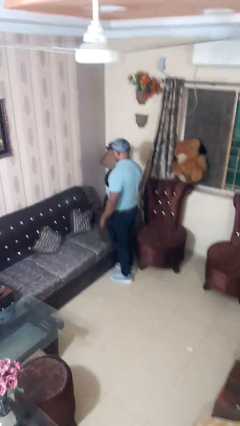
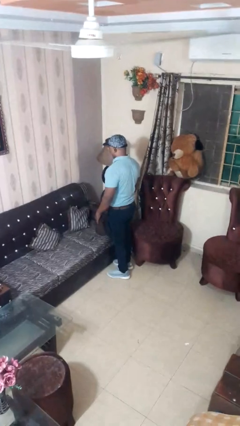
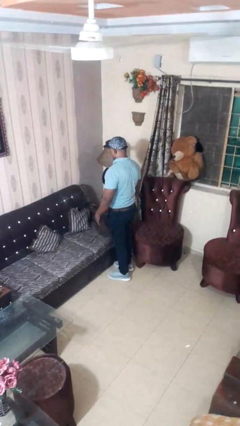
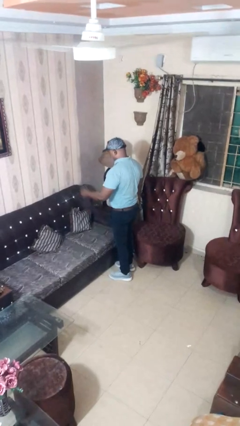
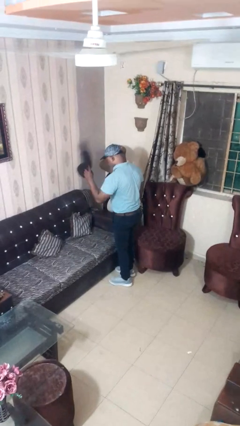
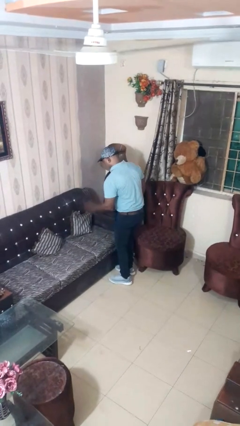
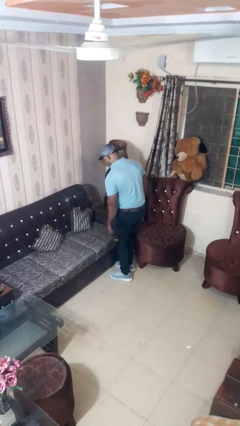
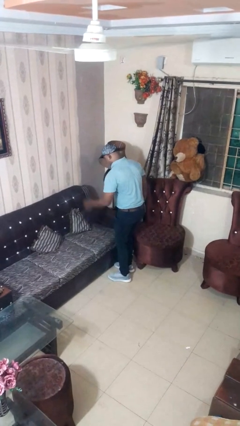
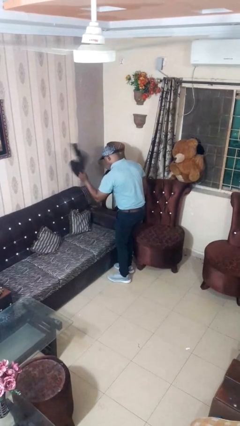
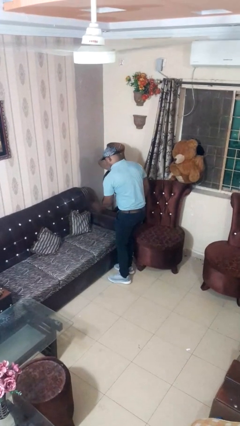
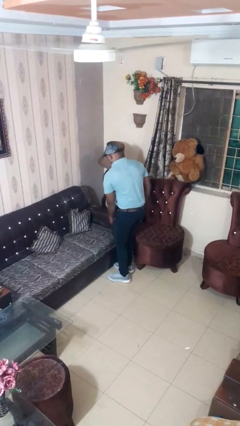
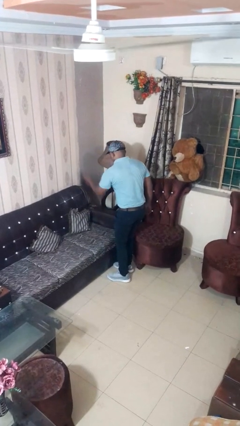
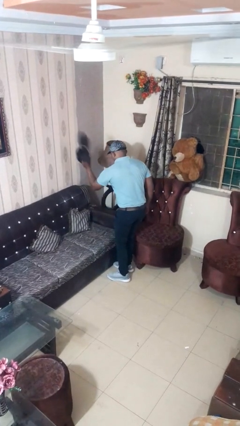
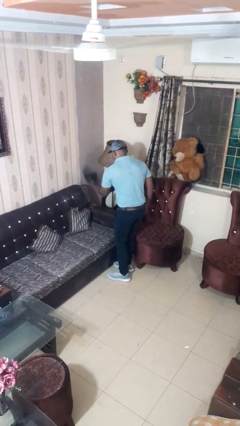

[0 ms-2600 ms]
person dusts furniture

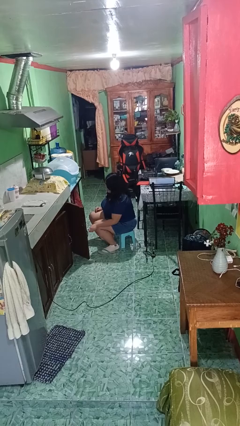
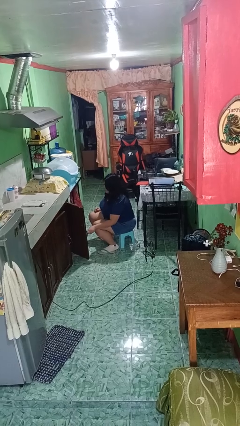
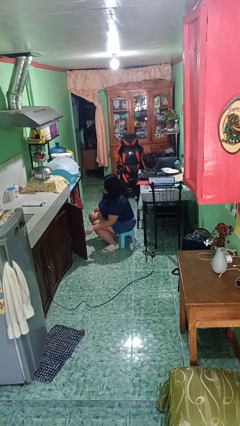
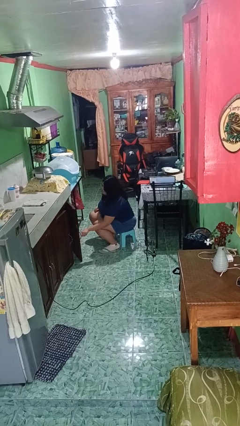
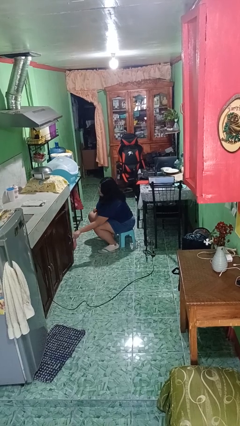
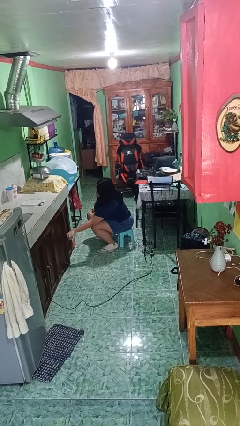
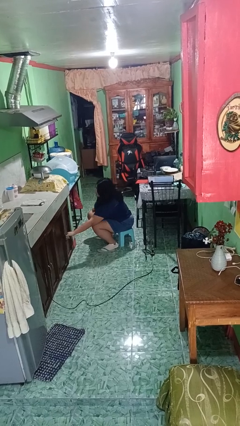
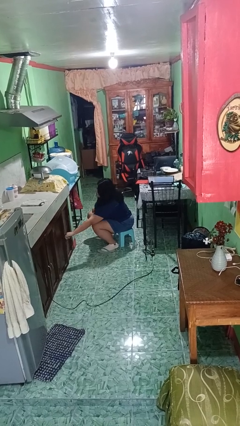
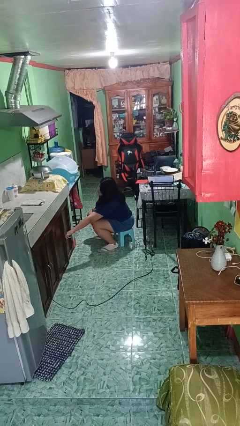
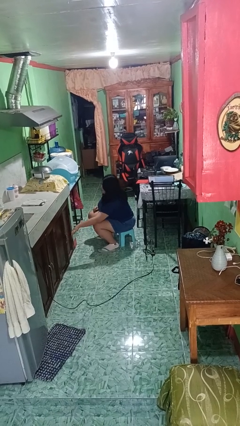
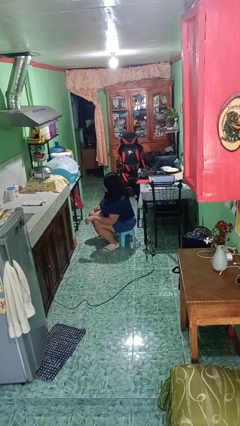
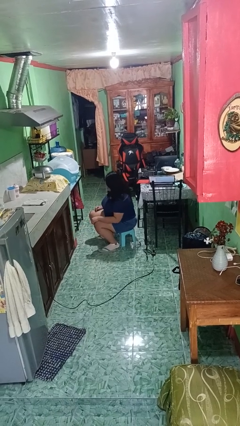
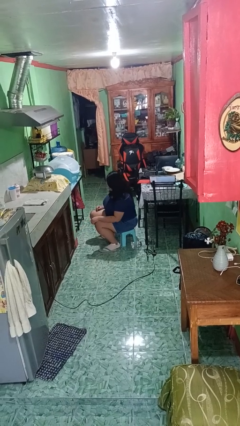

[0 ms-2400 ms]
person closes cabinet

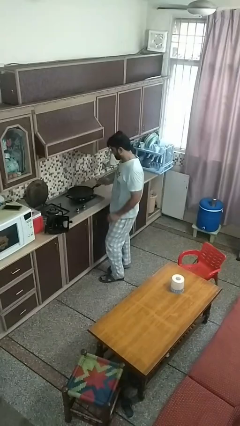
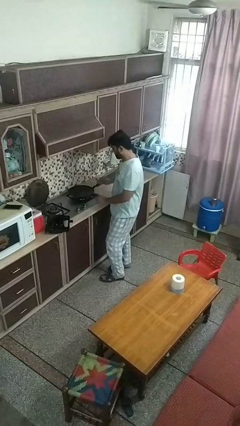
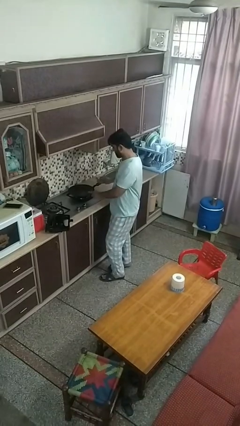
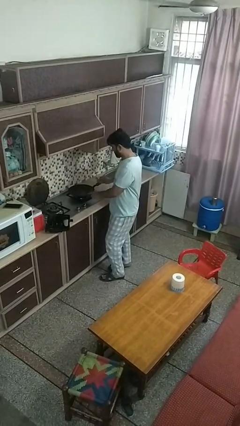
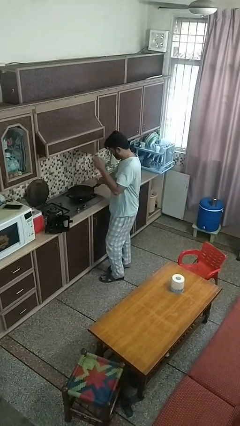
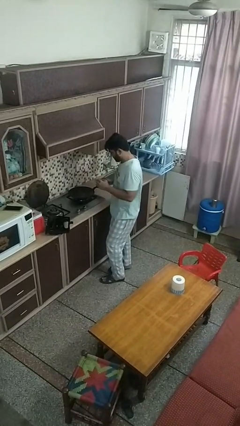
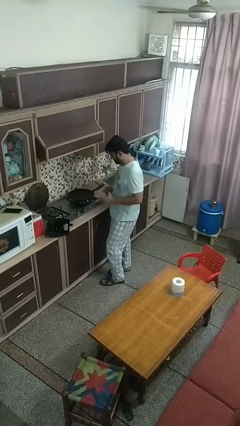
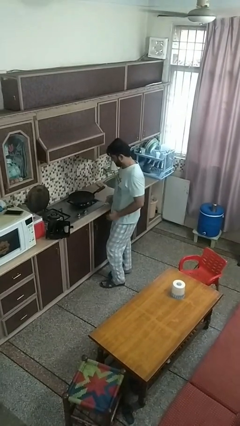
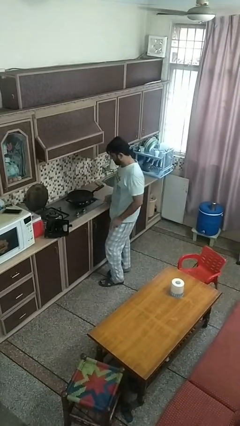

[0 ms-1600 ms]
person burns hand

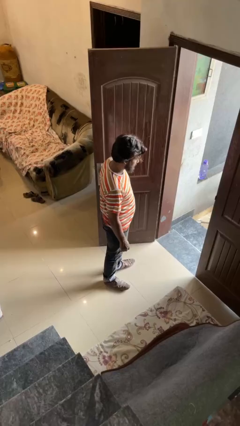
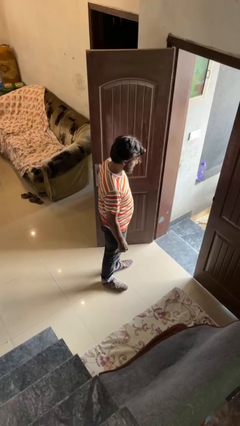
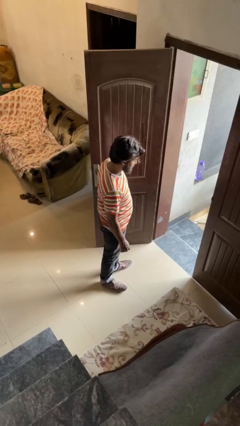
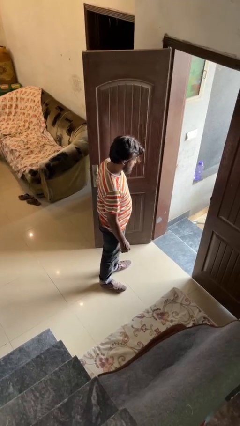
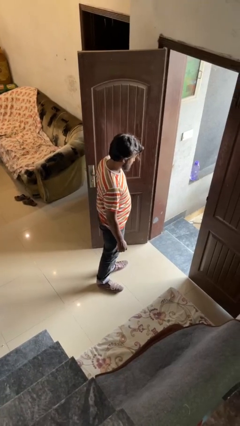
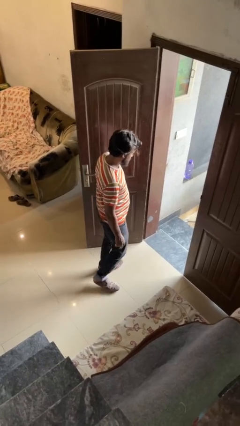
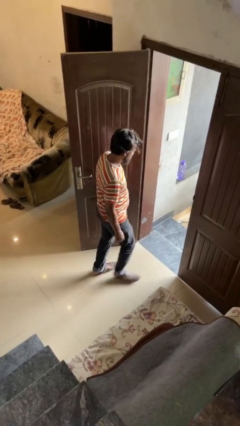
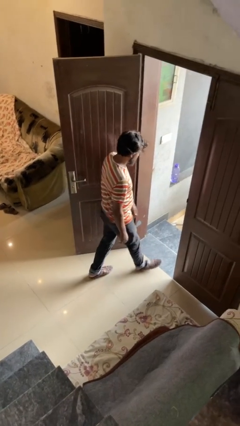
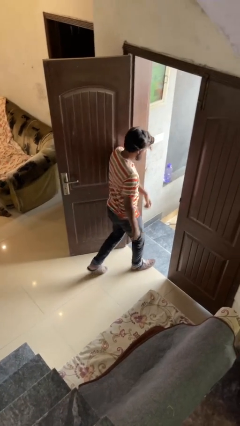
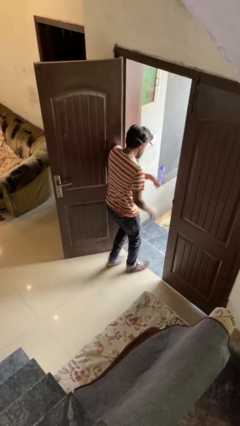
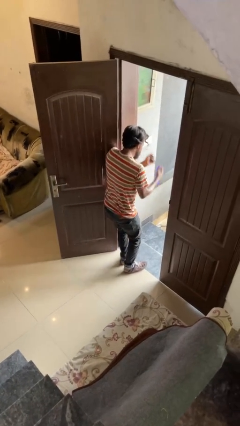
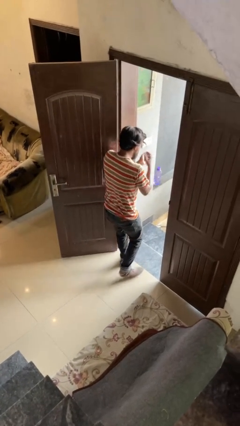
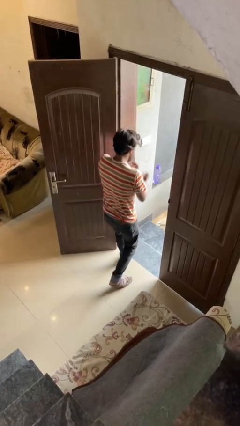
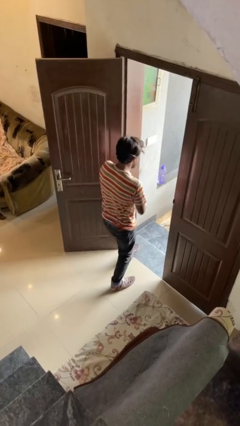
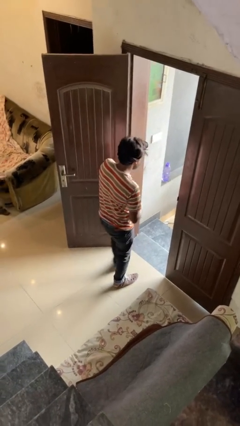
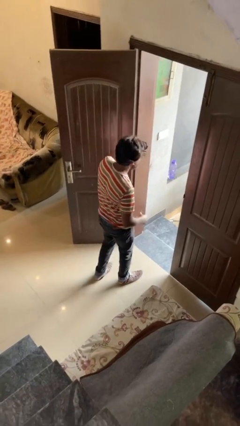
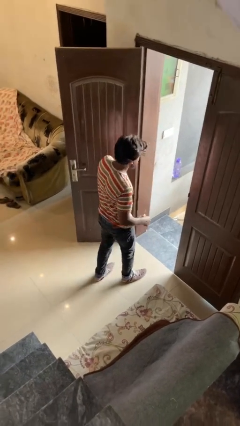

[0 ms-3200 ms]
person bumps into wall

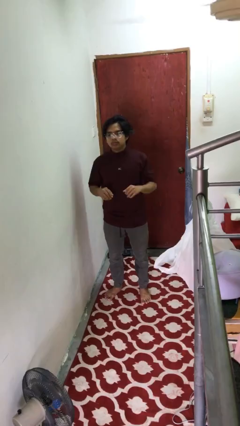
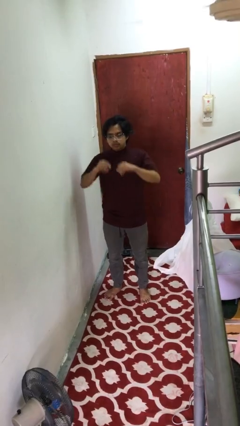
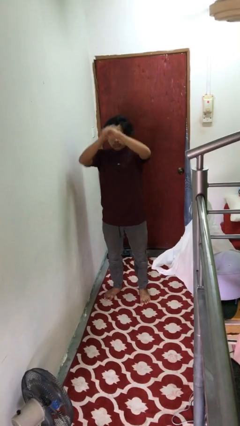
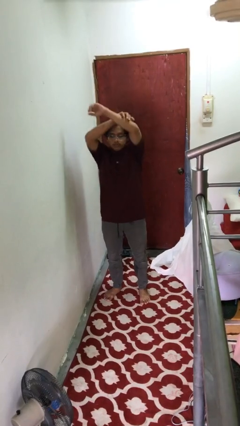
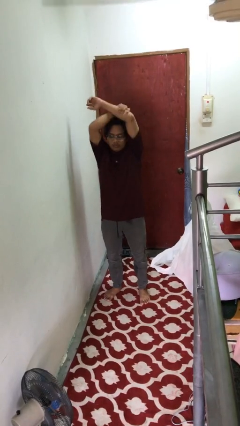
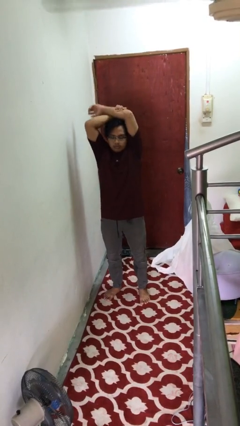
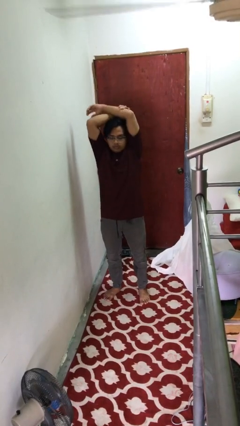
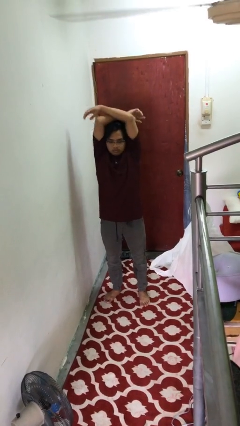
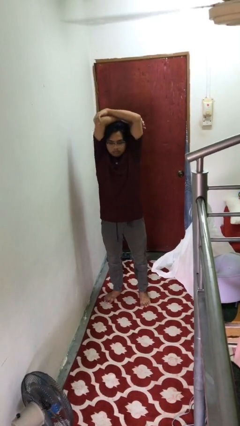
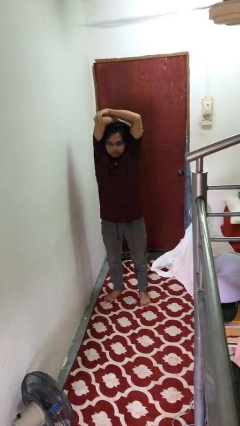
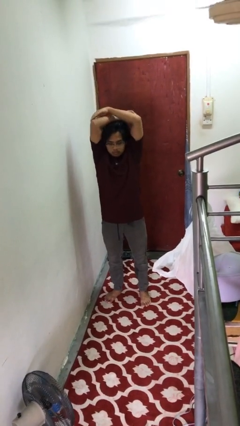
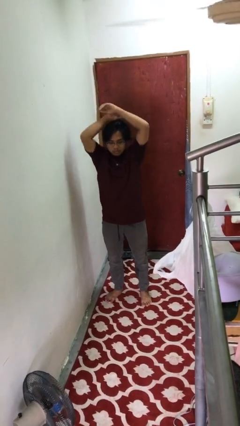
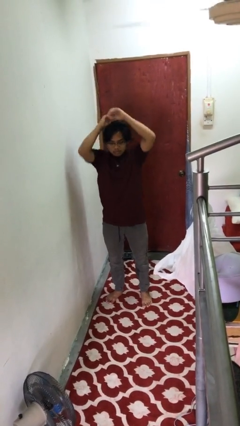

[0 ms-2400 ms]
person stretches arms over head

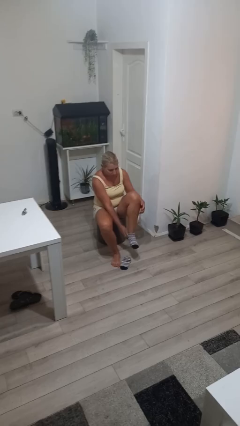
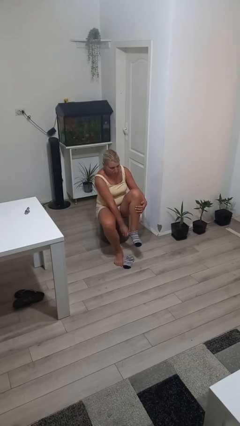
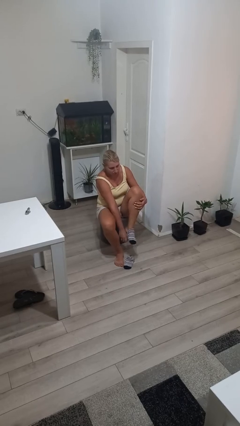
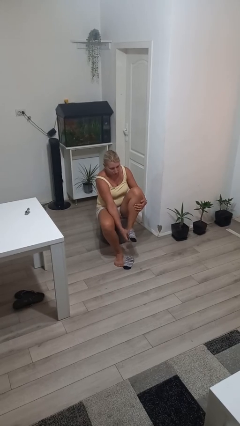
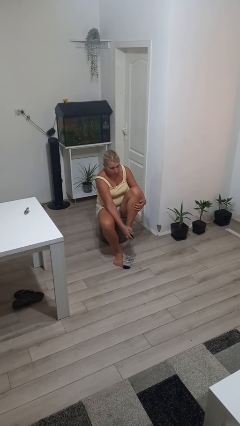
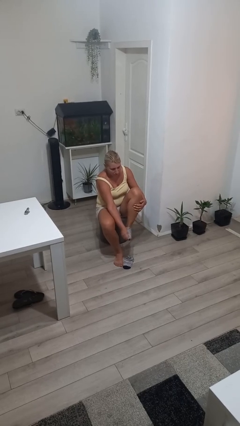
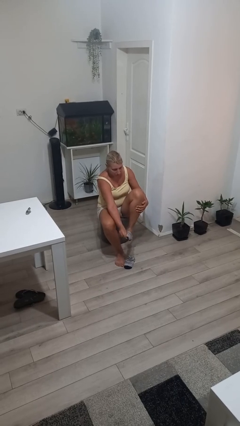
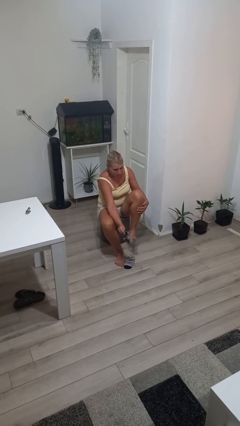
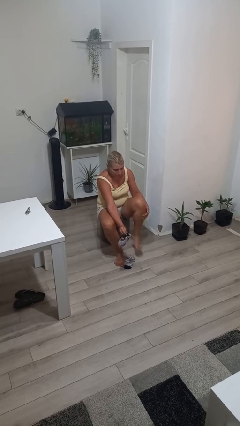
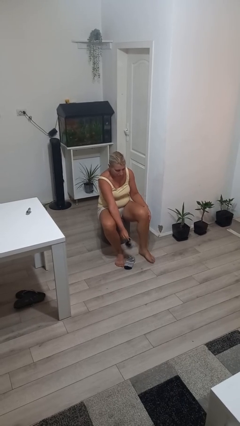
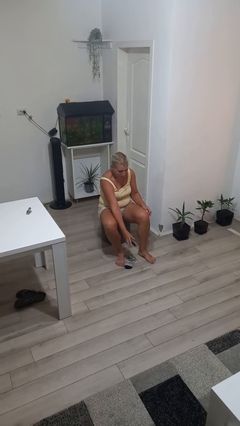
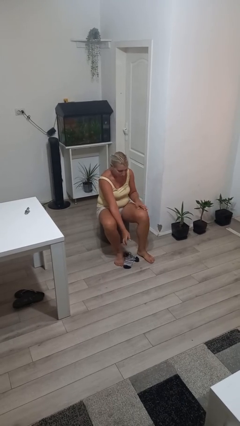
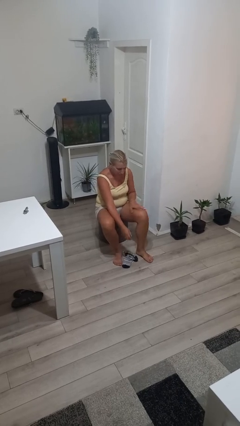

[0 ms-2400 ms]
person takes off socks

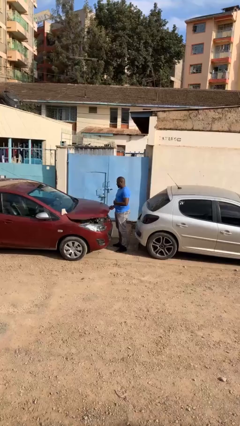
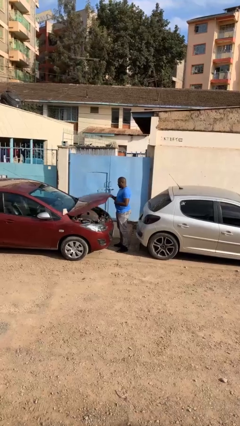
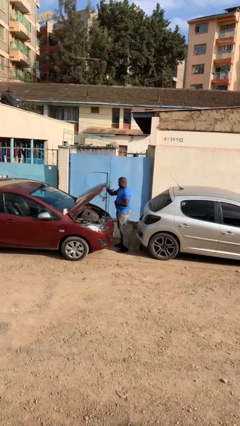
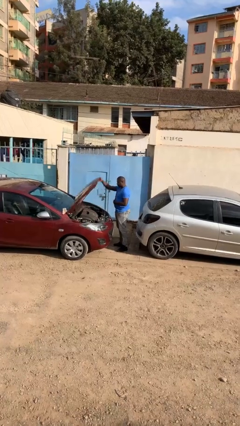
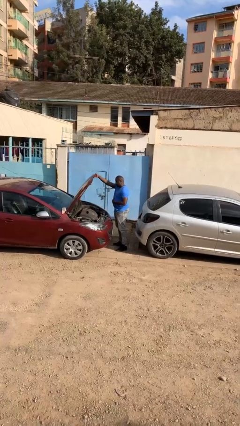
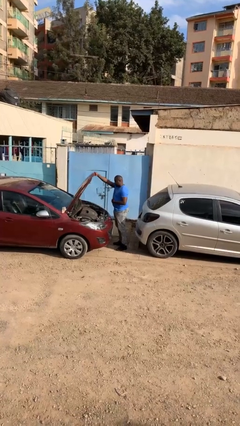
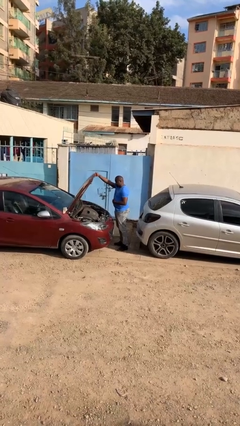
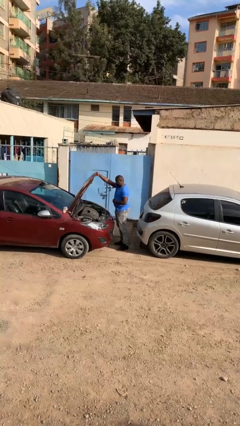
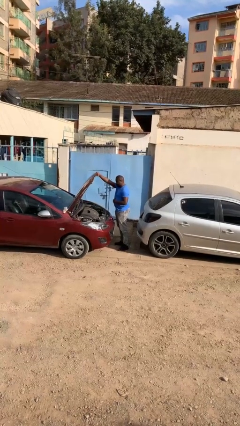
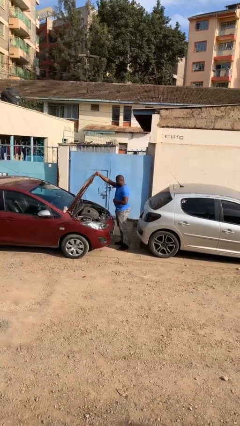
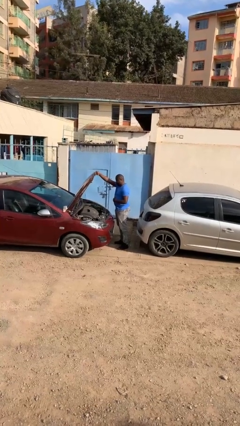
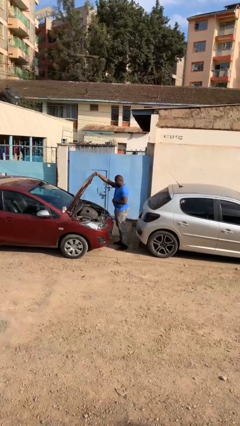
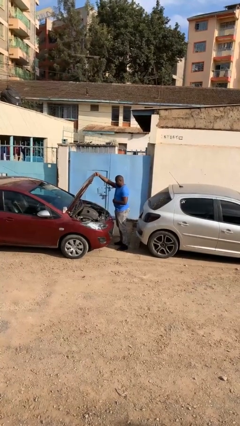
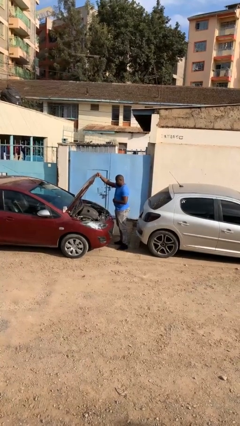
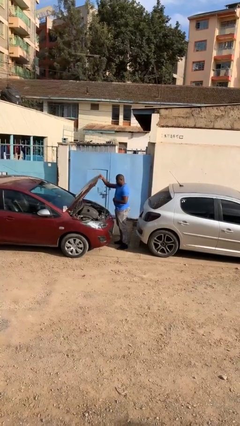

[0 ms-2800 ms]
person opens car hood
